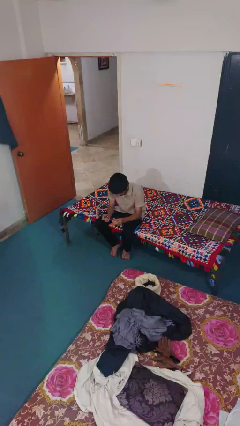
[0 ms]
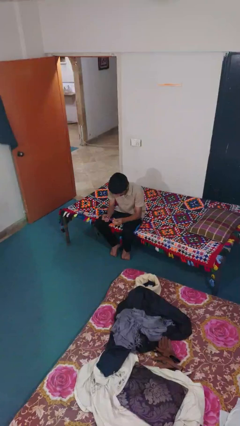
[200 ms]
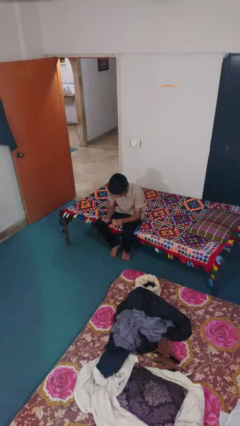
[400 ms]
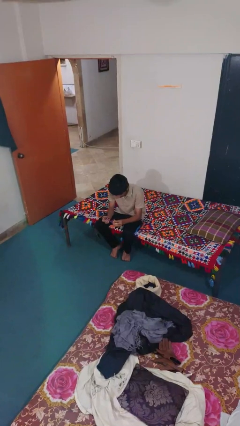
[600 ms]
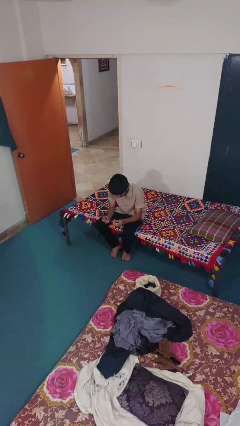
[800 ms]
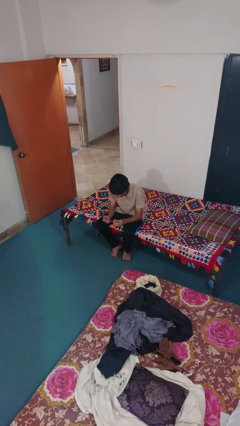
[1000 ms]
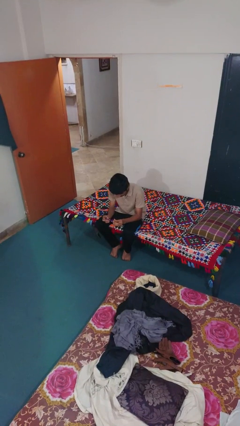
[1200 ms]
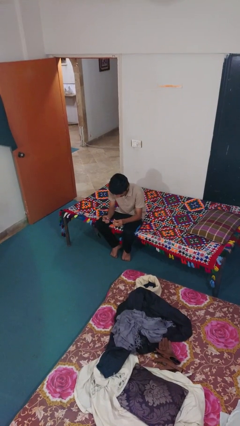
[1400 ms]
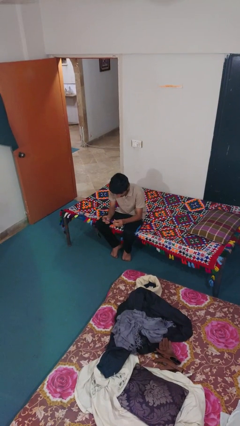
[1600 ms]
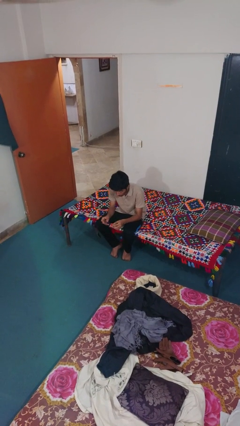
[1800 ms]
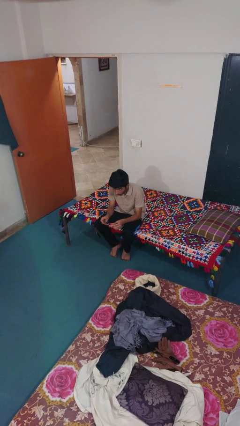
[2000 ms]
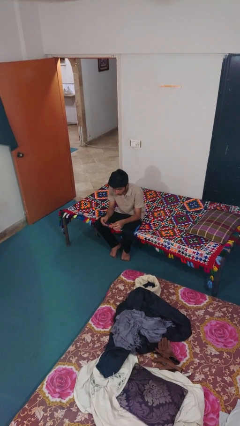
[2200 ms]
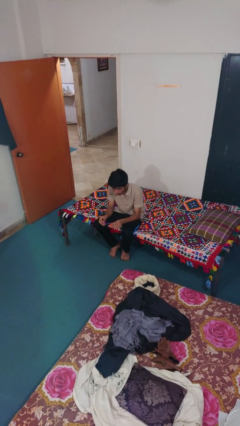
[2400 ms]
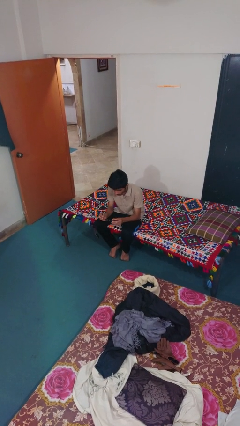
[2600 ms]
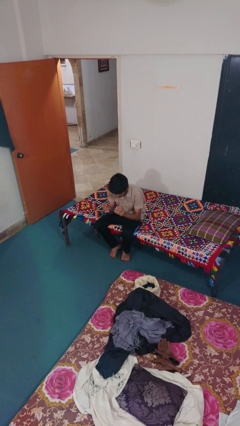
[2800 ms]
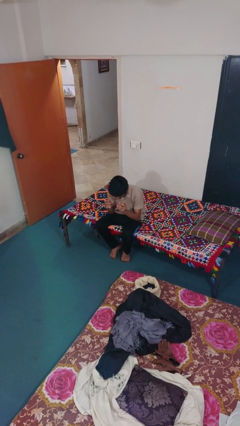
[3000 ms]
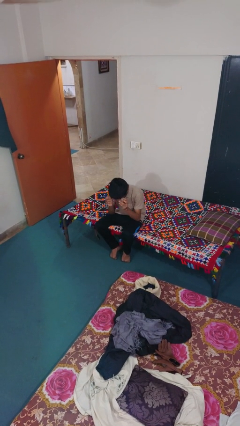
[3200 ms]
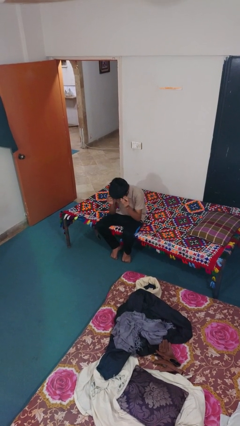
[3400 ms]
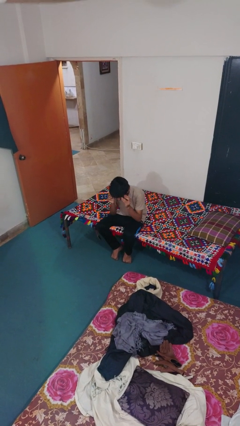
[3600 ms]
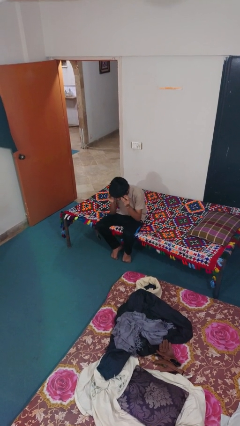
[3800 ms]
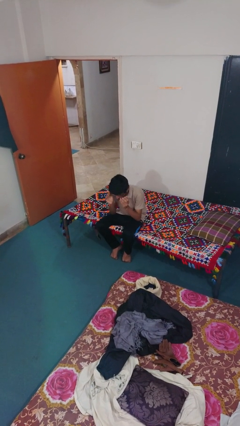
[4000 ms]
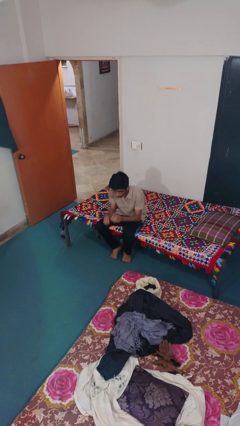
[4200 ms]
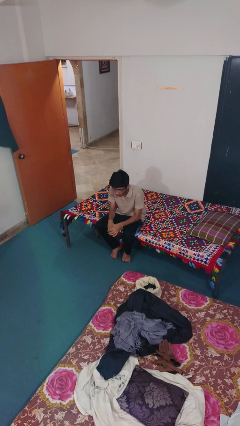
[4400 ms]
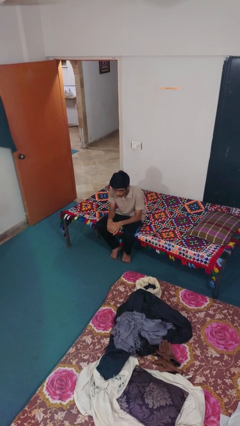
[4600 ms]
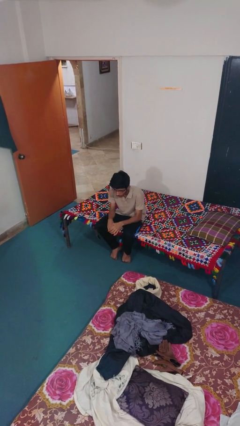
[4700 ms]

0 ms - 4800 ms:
person puts on glasses

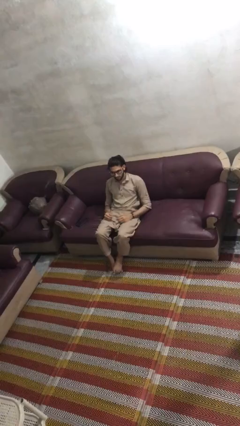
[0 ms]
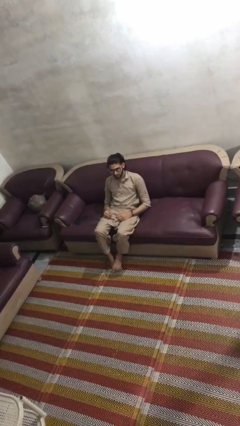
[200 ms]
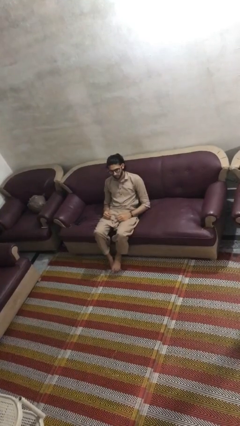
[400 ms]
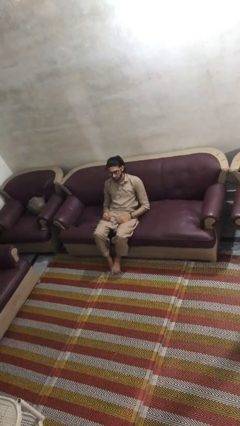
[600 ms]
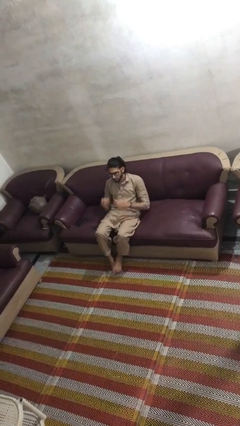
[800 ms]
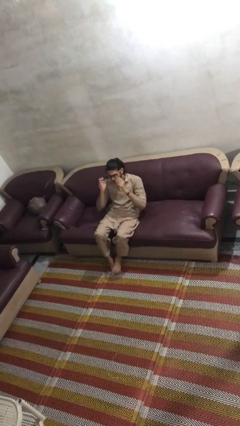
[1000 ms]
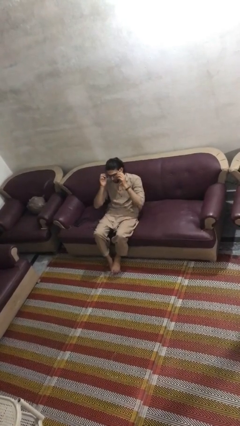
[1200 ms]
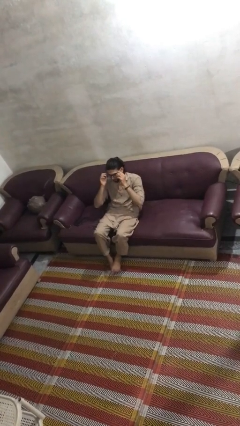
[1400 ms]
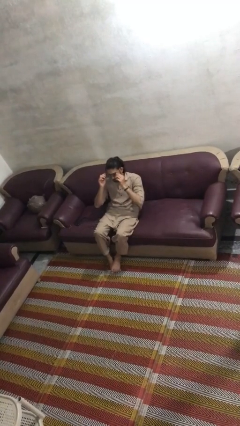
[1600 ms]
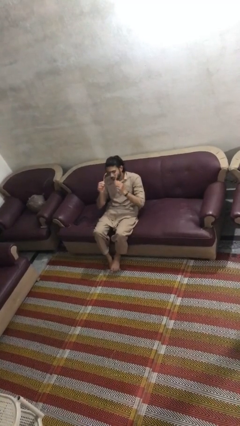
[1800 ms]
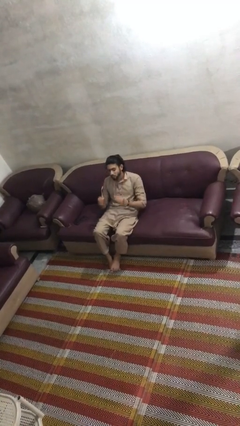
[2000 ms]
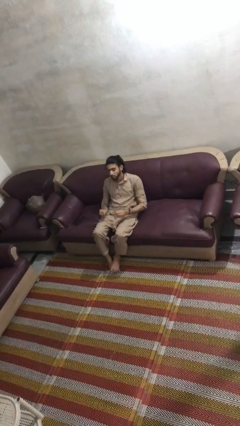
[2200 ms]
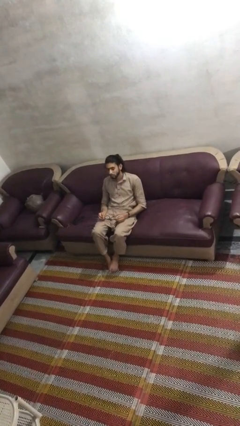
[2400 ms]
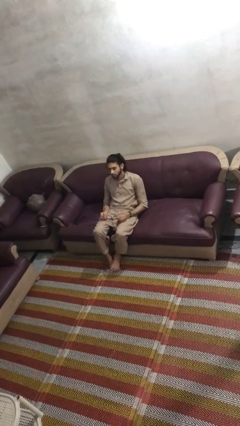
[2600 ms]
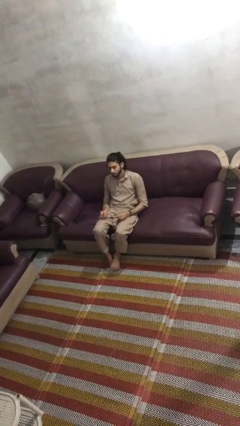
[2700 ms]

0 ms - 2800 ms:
person takes off glasses

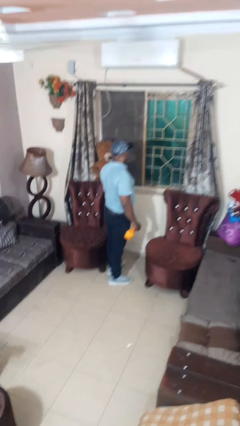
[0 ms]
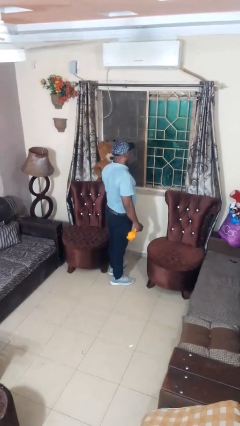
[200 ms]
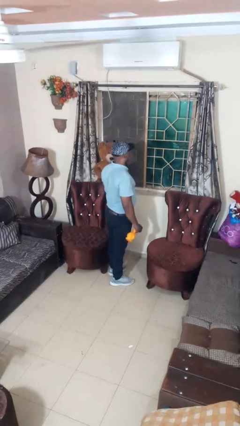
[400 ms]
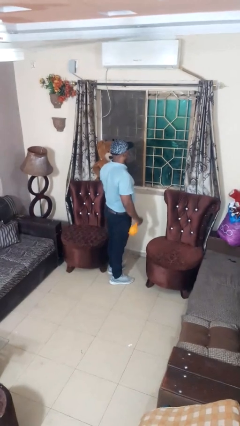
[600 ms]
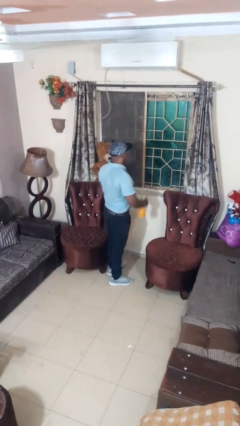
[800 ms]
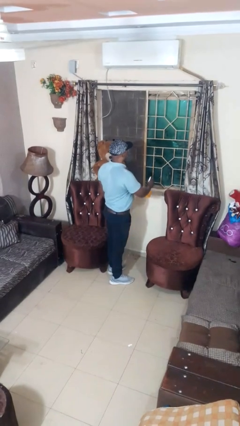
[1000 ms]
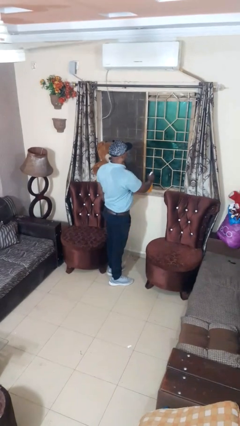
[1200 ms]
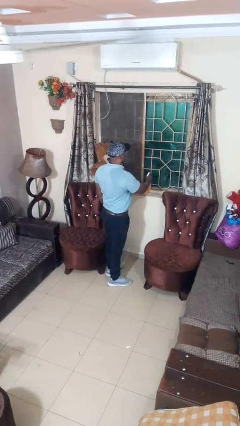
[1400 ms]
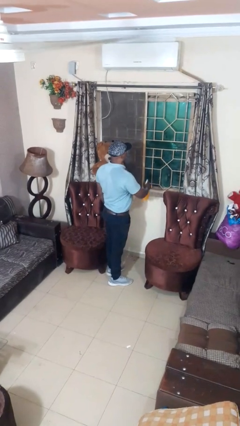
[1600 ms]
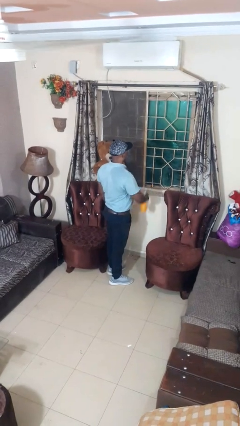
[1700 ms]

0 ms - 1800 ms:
person sprays from bottle

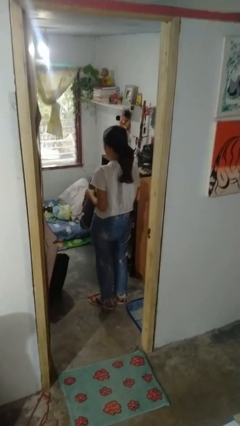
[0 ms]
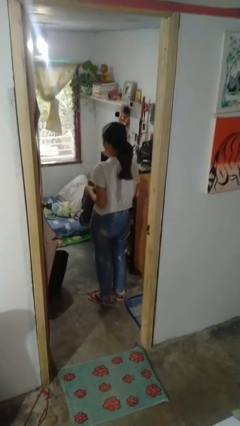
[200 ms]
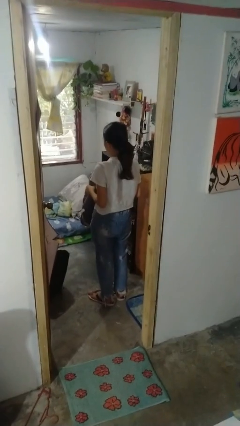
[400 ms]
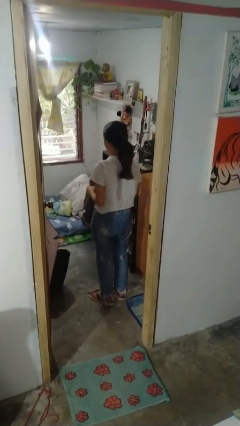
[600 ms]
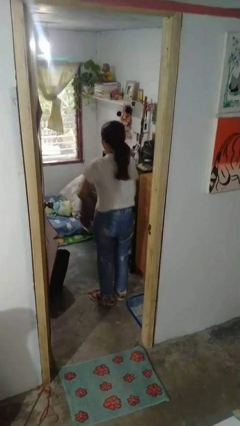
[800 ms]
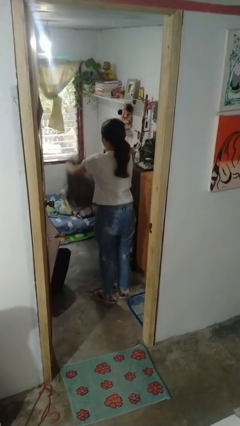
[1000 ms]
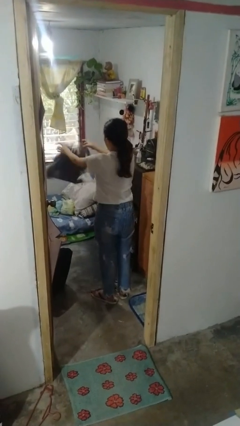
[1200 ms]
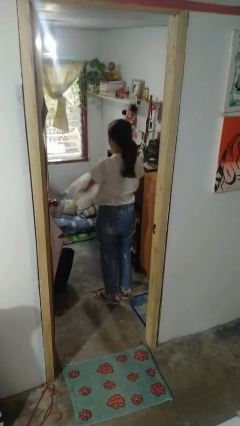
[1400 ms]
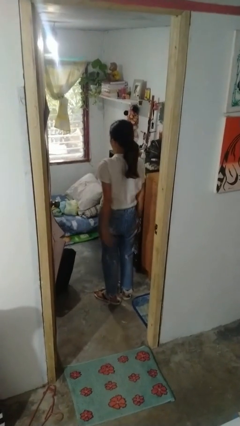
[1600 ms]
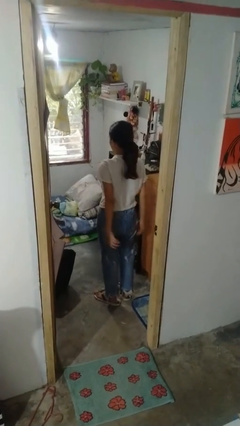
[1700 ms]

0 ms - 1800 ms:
person throws object on bed

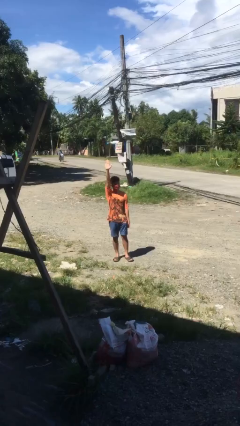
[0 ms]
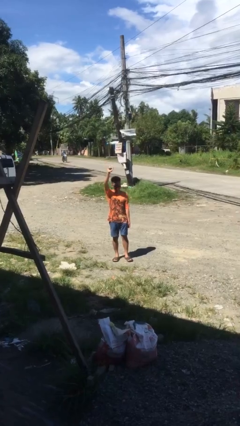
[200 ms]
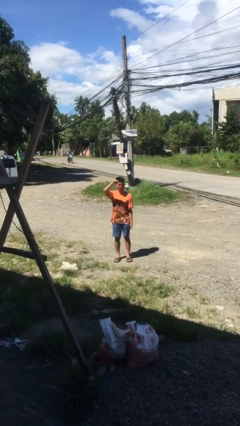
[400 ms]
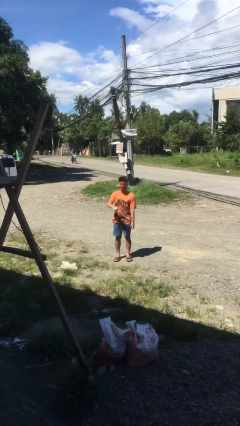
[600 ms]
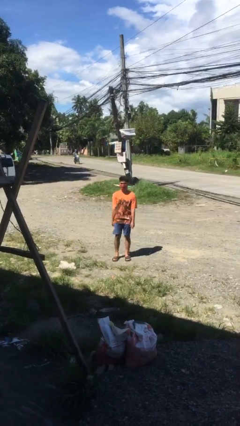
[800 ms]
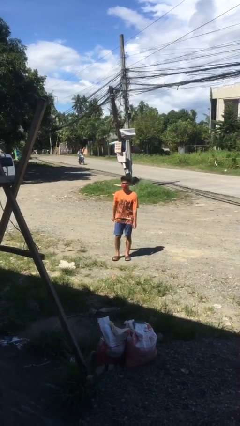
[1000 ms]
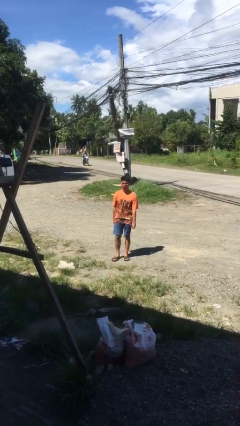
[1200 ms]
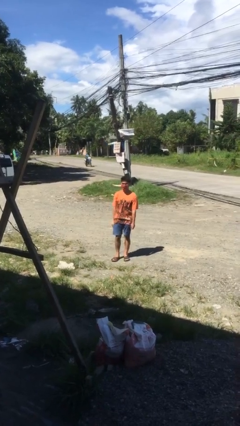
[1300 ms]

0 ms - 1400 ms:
person gestures lower hand

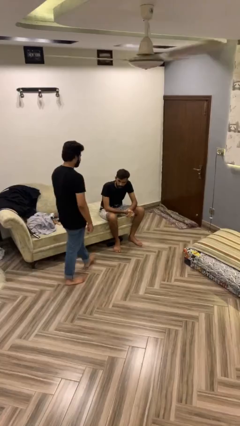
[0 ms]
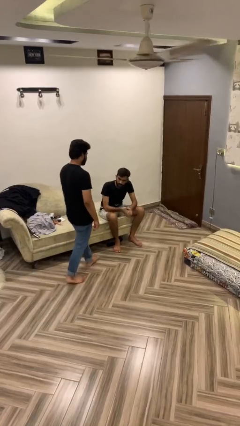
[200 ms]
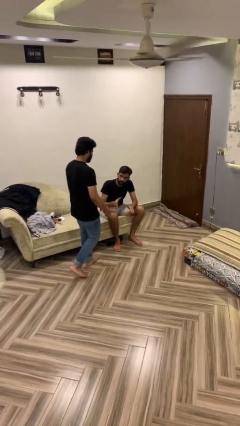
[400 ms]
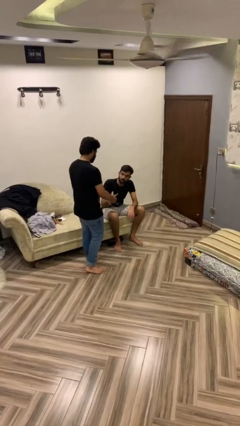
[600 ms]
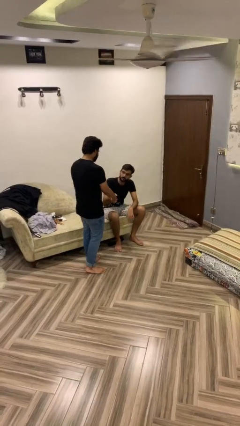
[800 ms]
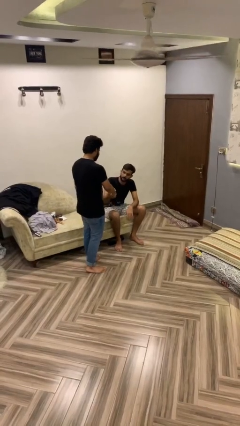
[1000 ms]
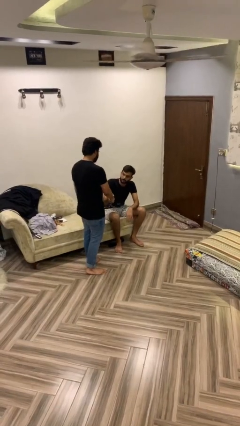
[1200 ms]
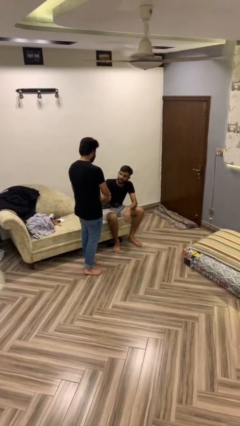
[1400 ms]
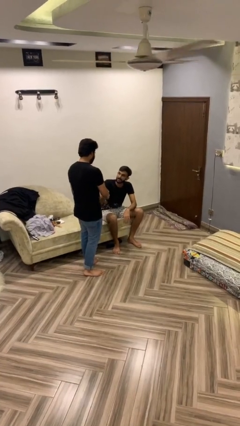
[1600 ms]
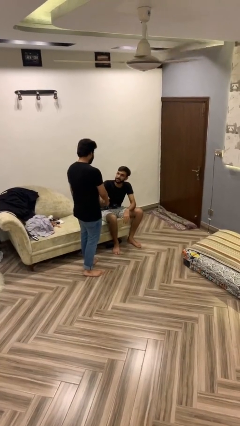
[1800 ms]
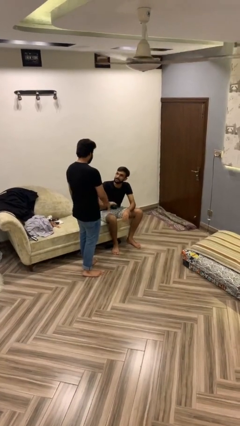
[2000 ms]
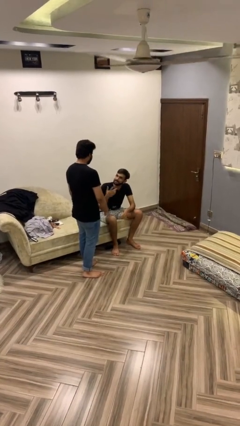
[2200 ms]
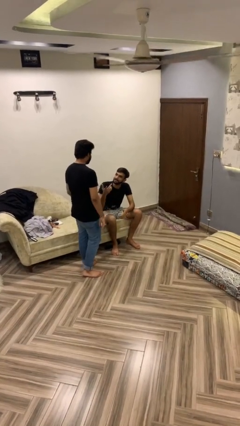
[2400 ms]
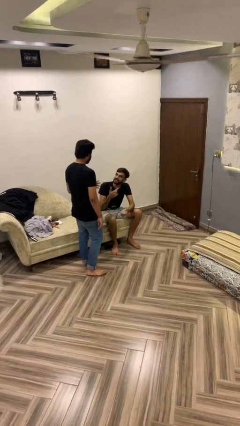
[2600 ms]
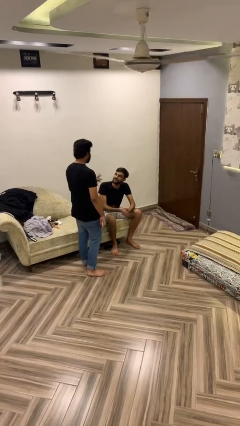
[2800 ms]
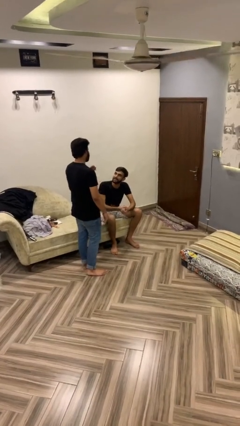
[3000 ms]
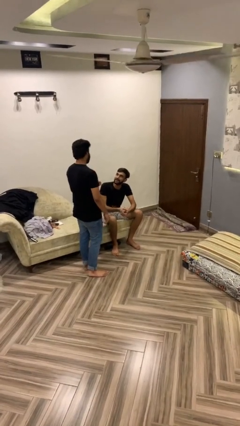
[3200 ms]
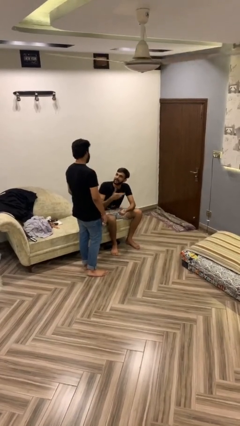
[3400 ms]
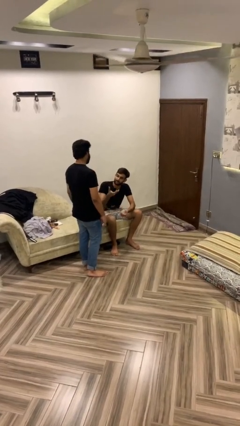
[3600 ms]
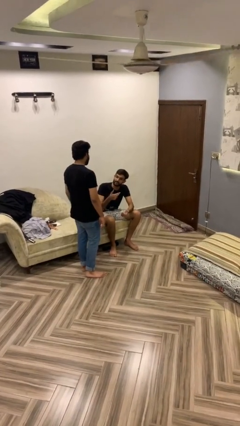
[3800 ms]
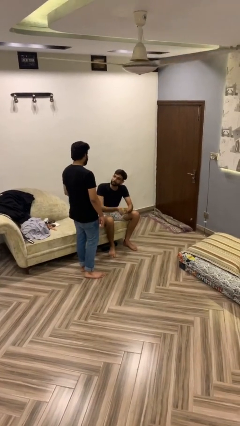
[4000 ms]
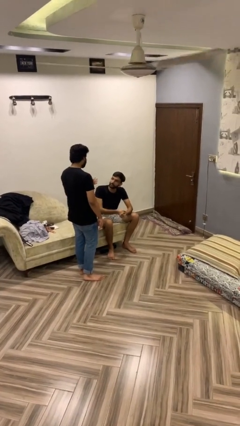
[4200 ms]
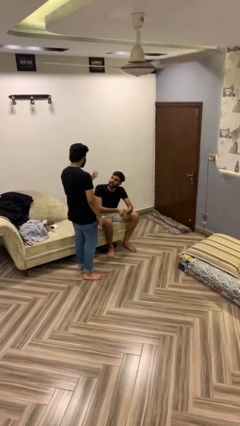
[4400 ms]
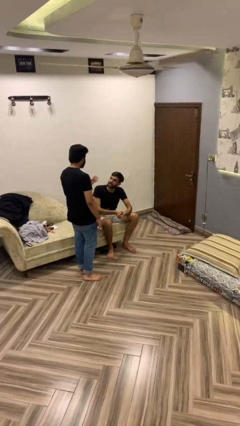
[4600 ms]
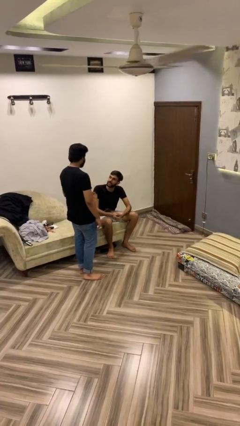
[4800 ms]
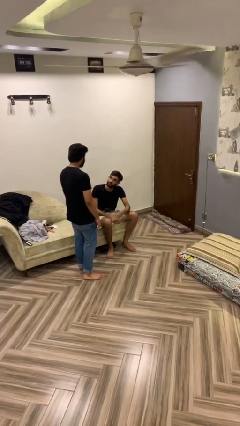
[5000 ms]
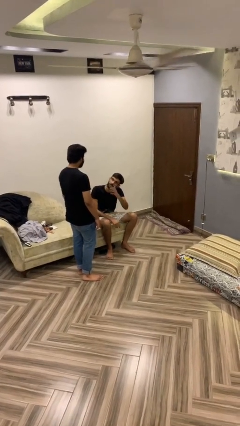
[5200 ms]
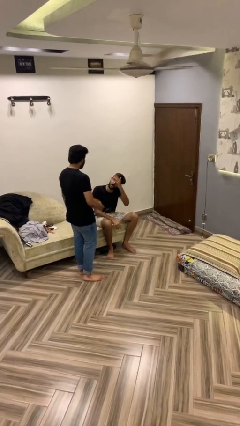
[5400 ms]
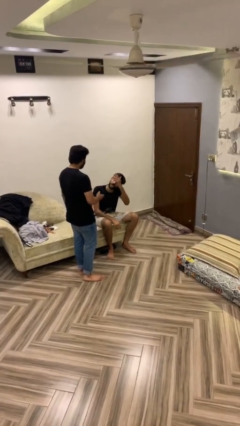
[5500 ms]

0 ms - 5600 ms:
person shakes hand
